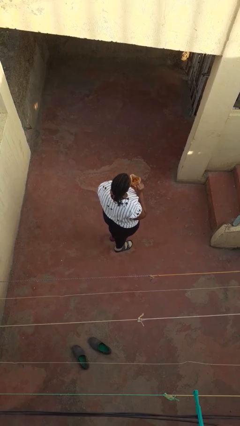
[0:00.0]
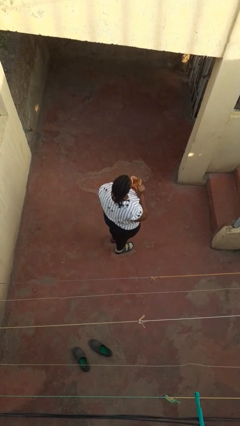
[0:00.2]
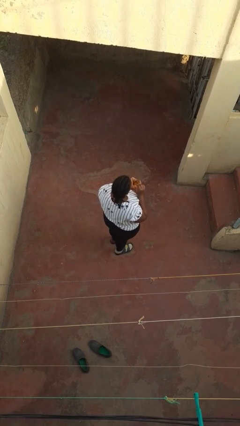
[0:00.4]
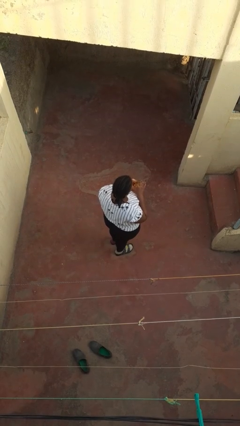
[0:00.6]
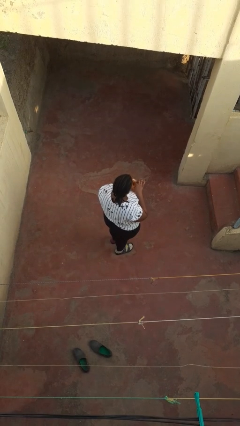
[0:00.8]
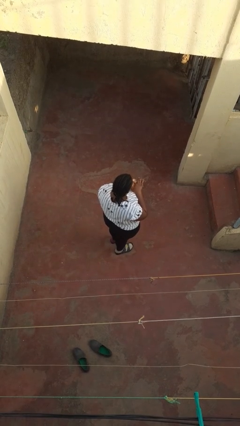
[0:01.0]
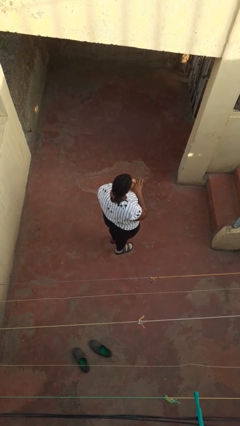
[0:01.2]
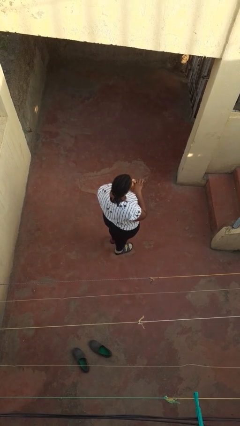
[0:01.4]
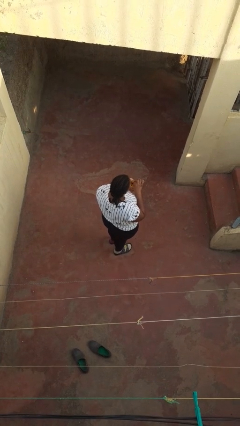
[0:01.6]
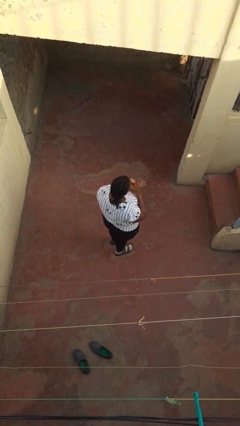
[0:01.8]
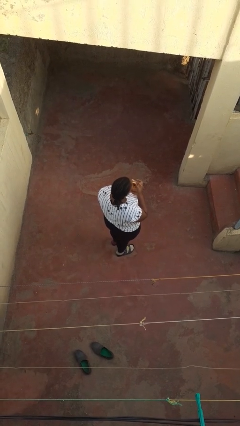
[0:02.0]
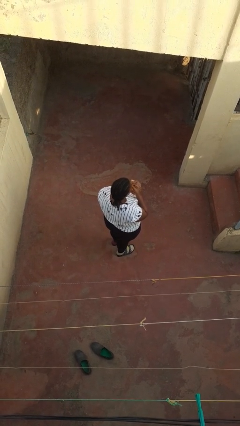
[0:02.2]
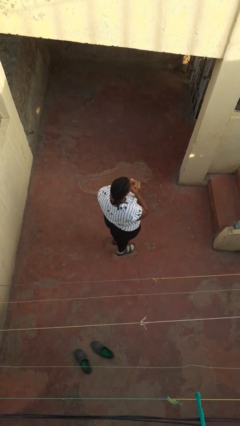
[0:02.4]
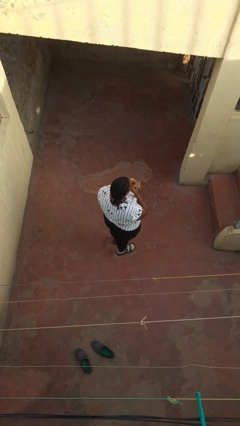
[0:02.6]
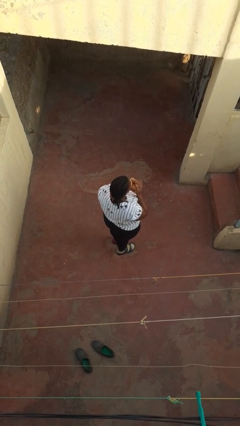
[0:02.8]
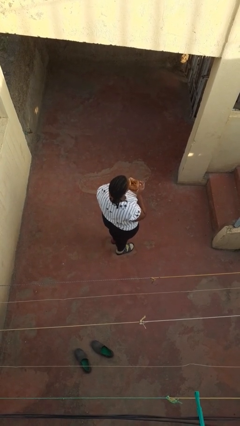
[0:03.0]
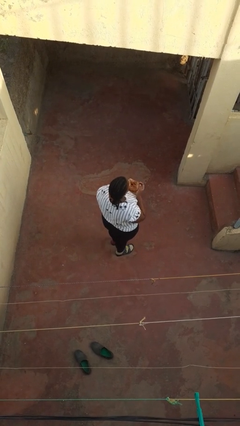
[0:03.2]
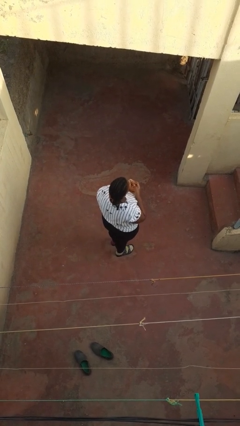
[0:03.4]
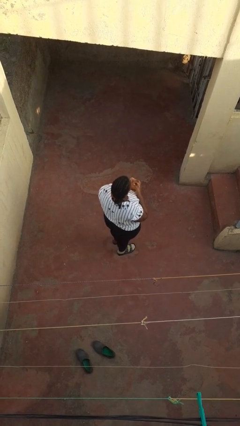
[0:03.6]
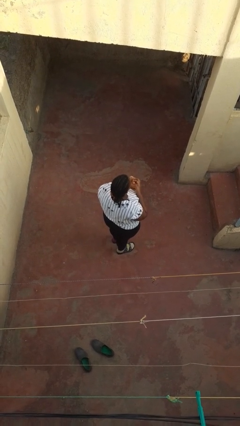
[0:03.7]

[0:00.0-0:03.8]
person eats snack from bag

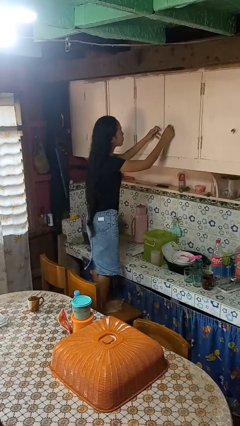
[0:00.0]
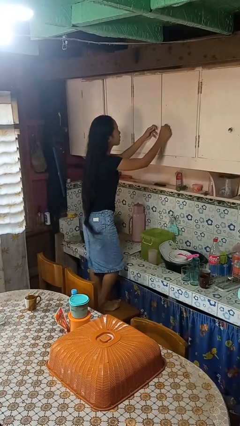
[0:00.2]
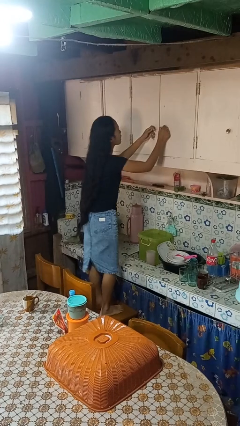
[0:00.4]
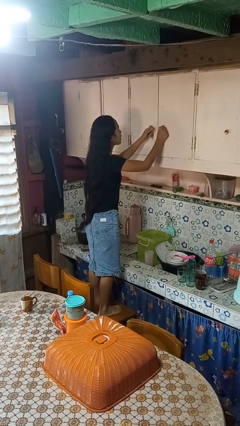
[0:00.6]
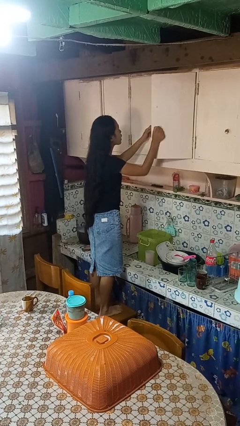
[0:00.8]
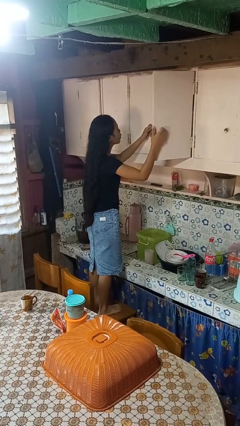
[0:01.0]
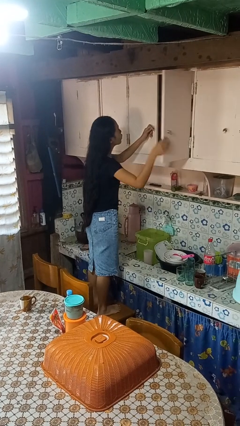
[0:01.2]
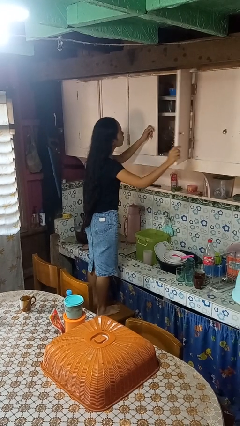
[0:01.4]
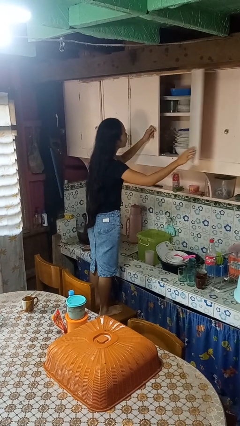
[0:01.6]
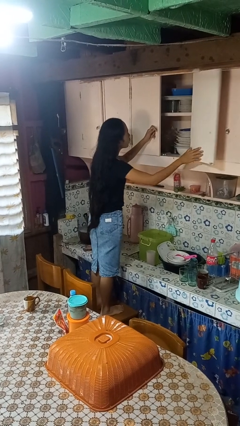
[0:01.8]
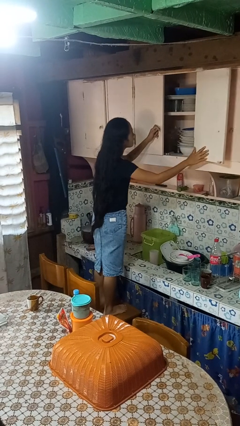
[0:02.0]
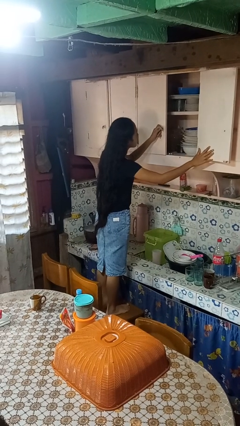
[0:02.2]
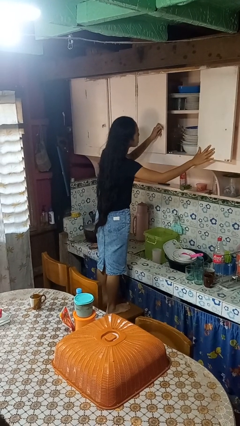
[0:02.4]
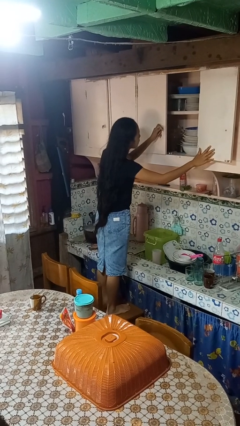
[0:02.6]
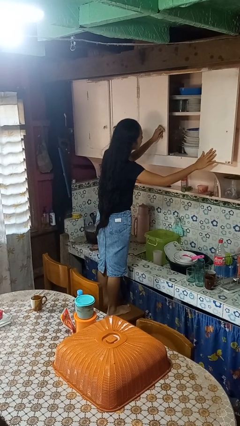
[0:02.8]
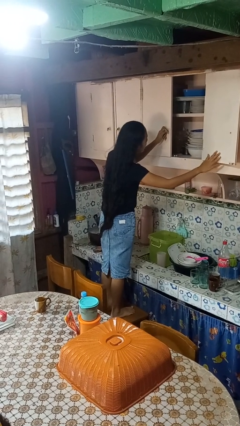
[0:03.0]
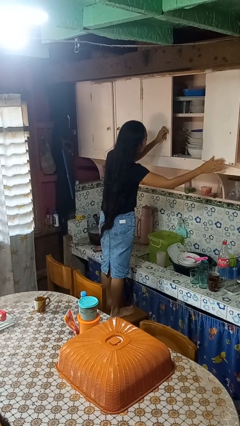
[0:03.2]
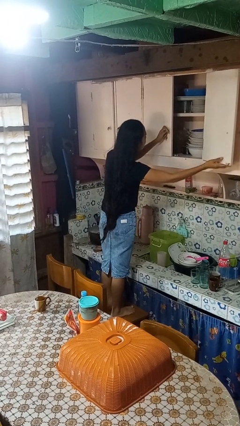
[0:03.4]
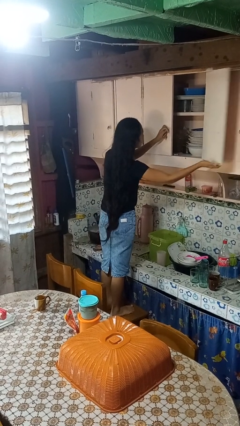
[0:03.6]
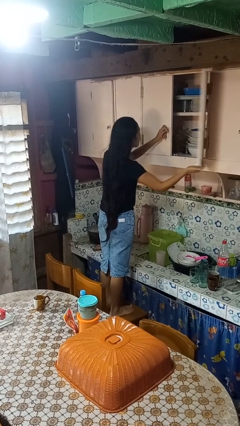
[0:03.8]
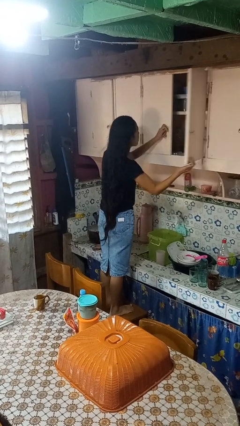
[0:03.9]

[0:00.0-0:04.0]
person opens cabinet

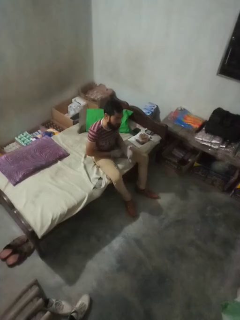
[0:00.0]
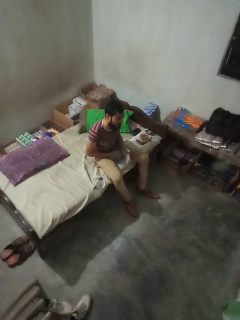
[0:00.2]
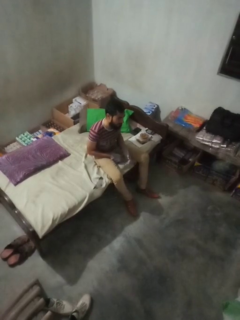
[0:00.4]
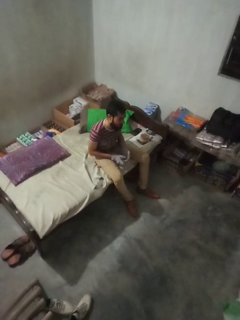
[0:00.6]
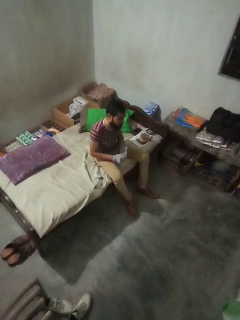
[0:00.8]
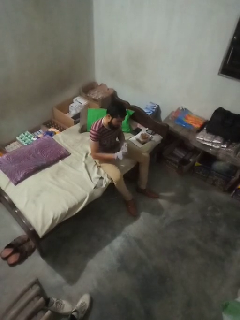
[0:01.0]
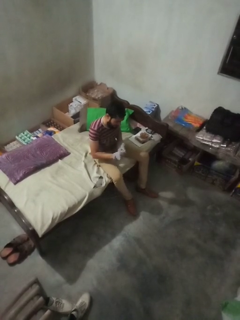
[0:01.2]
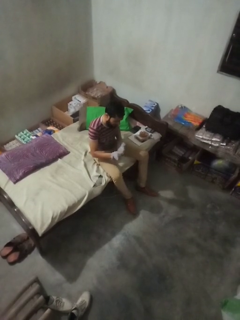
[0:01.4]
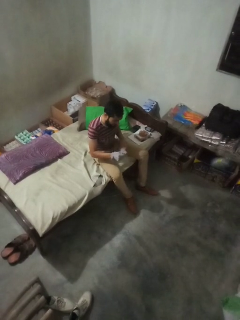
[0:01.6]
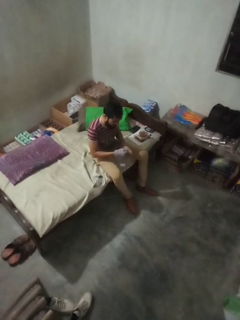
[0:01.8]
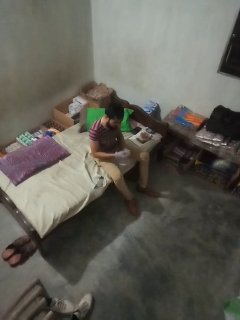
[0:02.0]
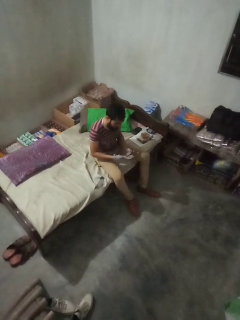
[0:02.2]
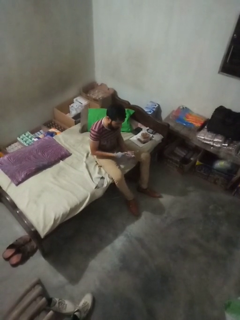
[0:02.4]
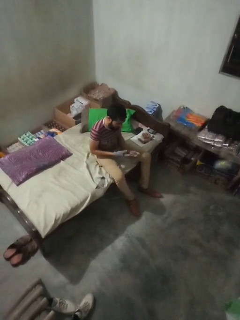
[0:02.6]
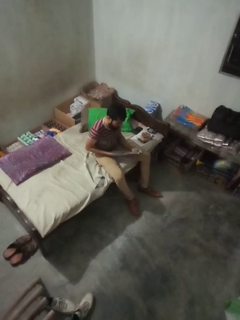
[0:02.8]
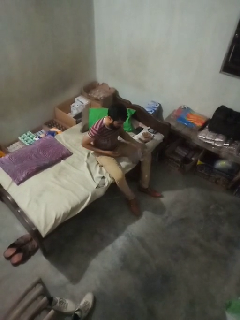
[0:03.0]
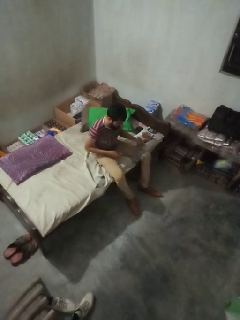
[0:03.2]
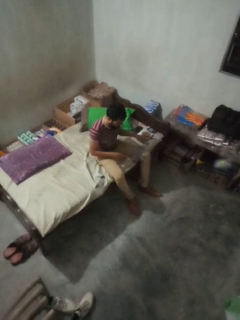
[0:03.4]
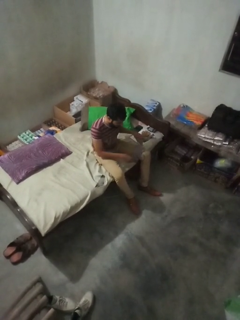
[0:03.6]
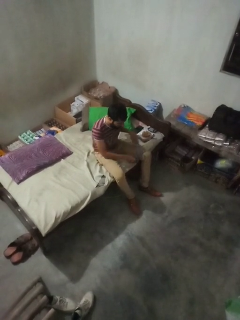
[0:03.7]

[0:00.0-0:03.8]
person takes off gloves

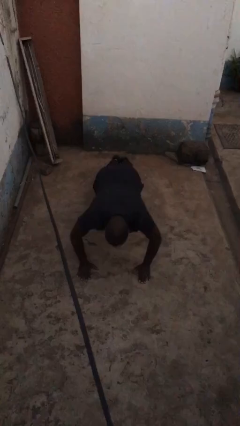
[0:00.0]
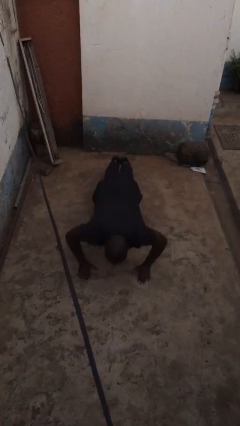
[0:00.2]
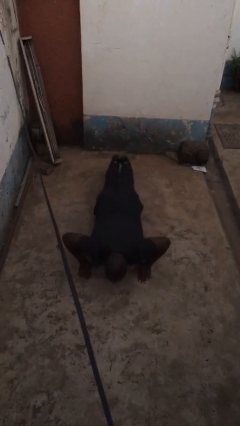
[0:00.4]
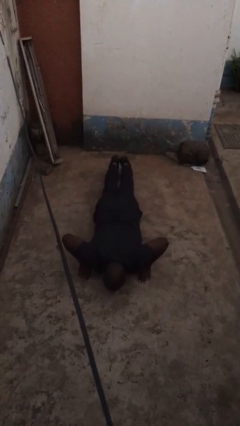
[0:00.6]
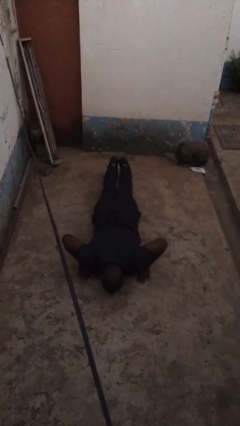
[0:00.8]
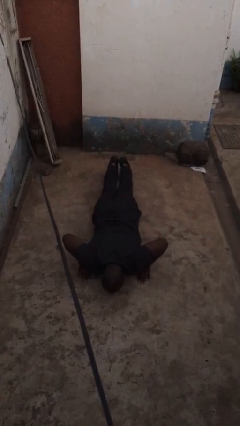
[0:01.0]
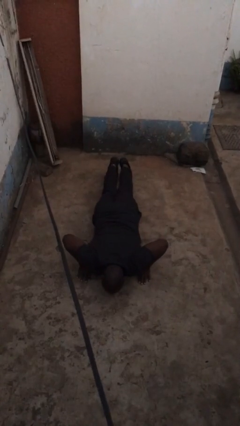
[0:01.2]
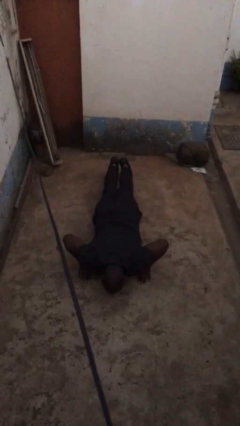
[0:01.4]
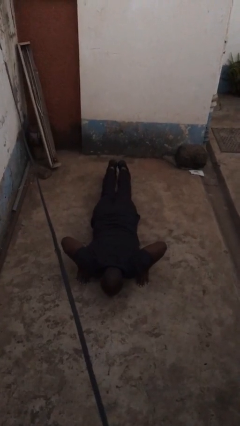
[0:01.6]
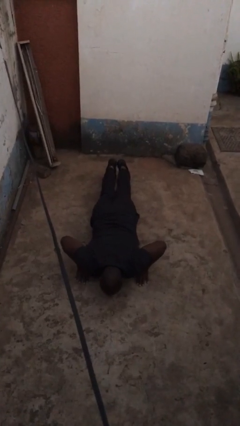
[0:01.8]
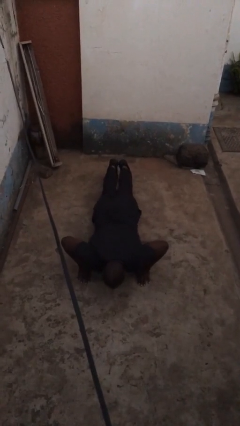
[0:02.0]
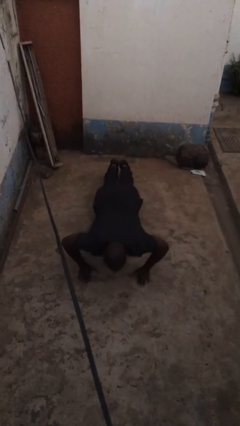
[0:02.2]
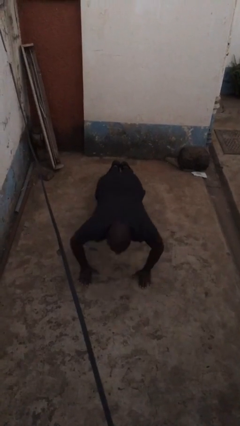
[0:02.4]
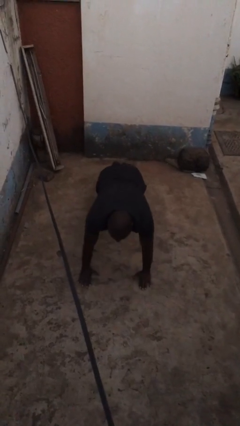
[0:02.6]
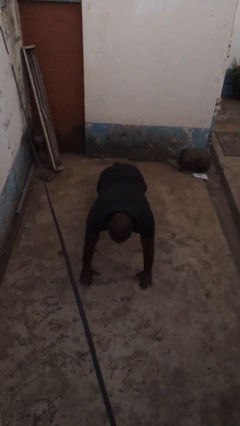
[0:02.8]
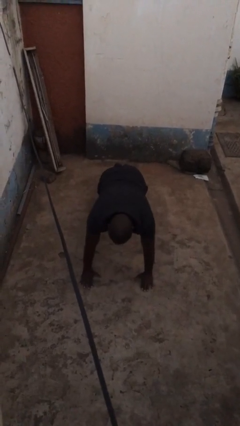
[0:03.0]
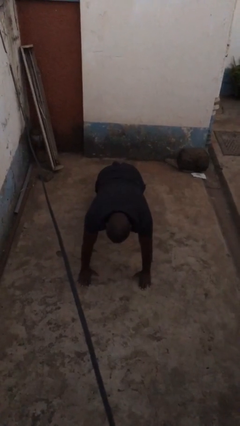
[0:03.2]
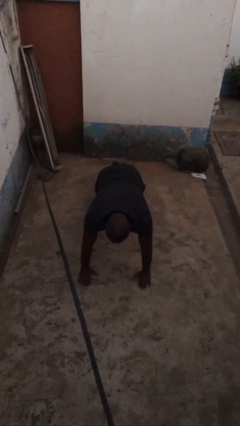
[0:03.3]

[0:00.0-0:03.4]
person exercises with pushup

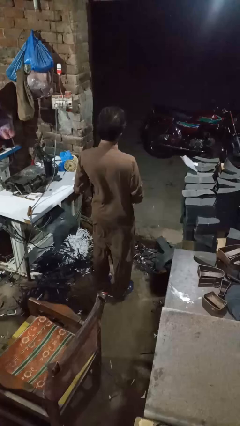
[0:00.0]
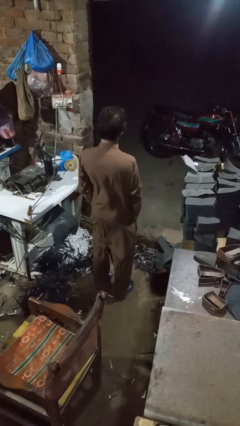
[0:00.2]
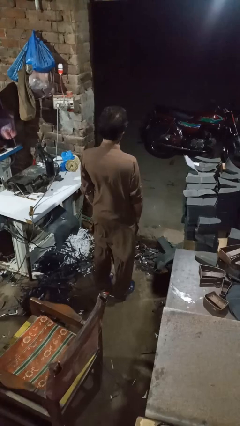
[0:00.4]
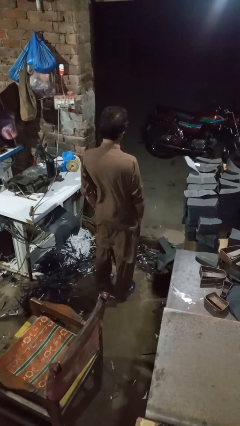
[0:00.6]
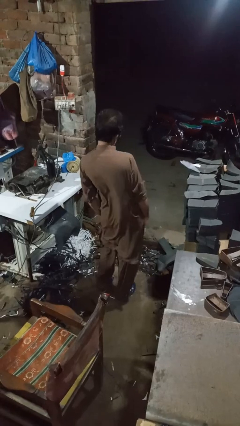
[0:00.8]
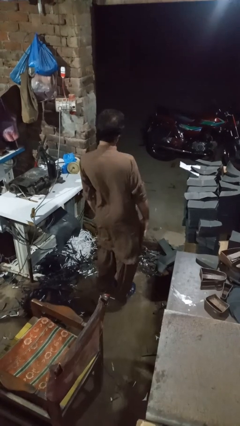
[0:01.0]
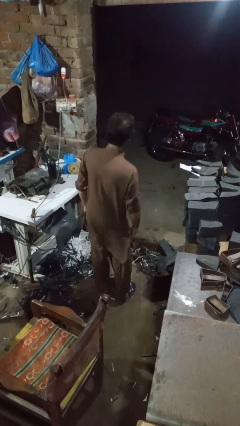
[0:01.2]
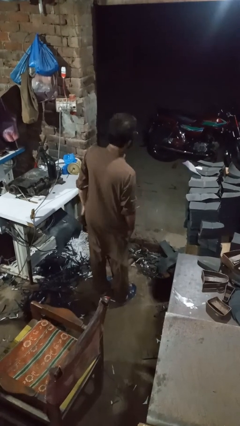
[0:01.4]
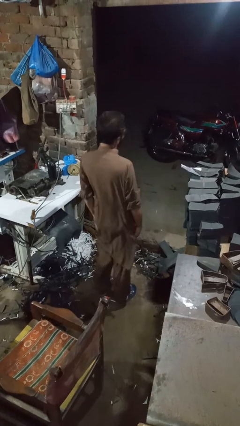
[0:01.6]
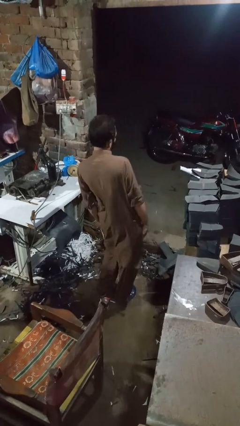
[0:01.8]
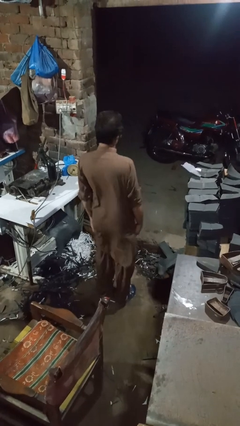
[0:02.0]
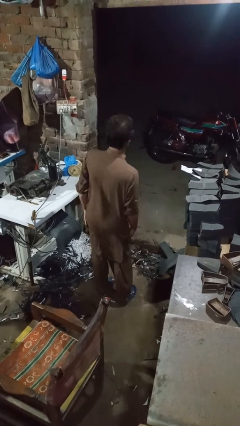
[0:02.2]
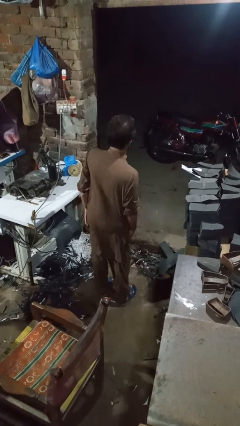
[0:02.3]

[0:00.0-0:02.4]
person wiggles hips

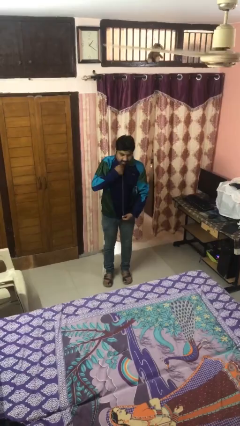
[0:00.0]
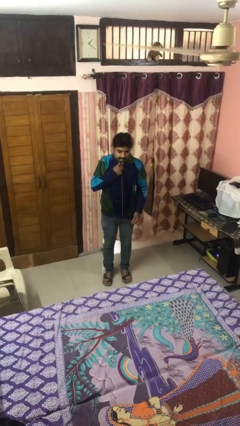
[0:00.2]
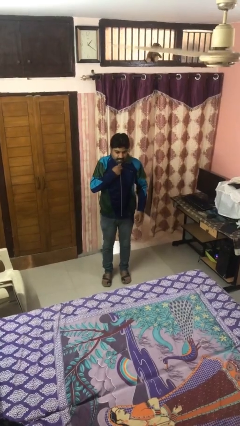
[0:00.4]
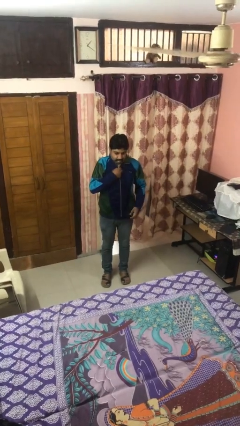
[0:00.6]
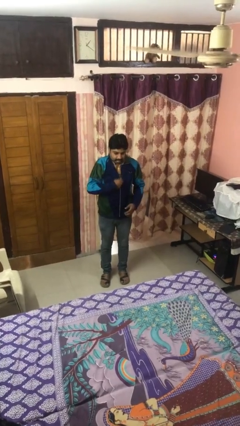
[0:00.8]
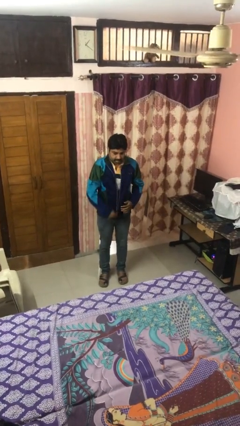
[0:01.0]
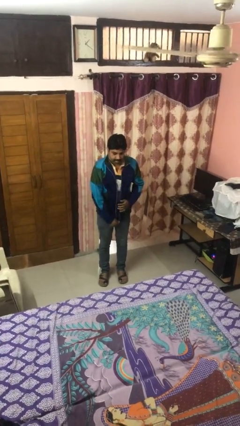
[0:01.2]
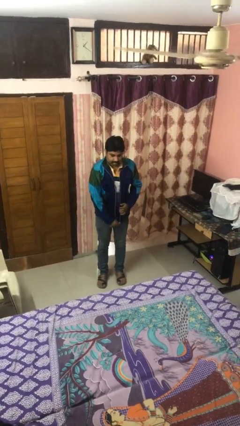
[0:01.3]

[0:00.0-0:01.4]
person unzips jacket
